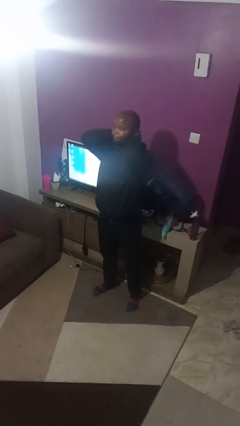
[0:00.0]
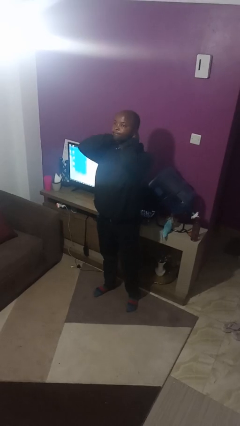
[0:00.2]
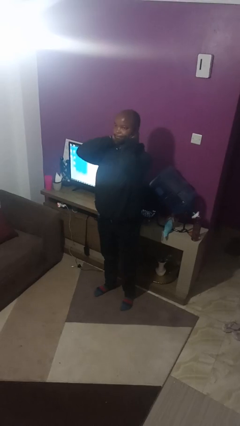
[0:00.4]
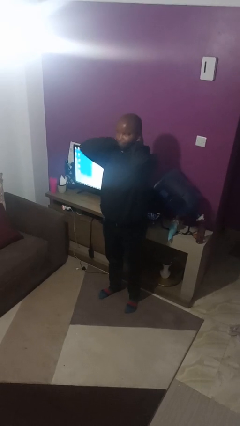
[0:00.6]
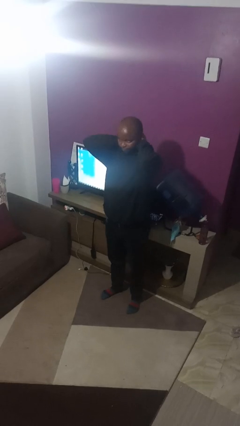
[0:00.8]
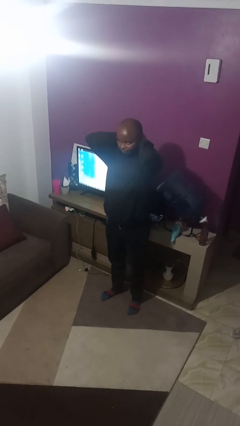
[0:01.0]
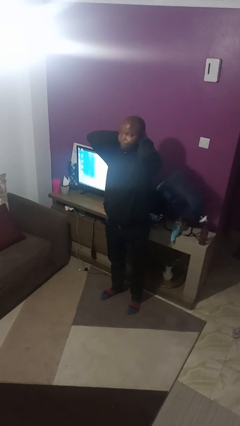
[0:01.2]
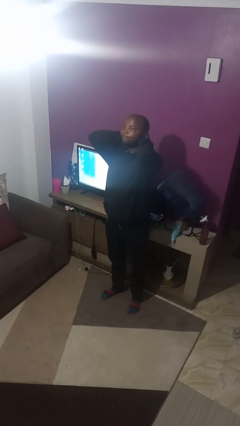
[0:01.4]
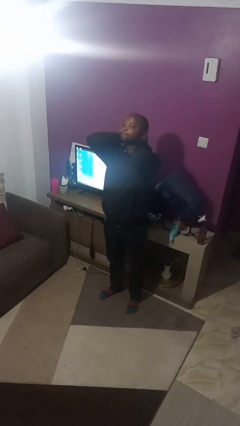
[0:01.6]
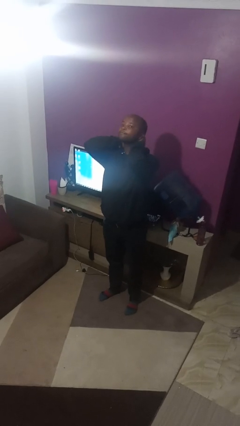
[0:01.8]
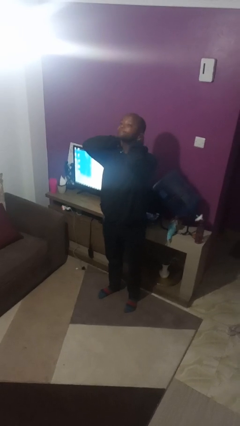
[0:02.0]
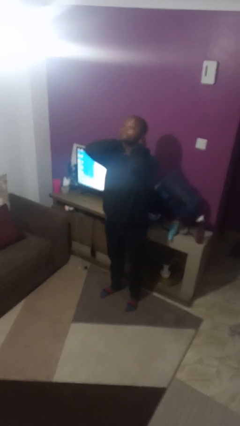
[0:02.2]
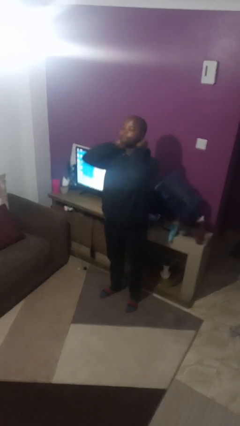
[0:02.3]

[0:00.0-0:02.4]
person rubs neck

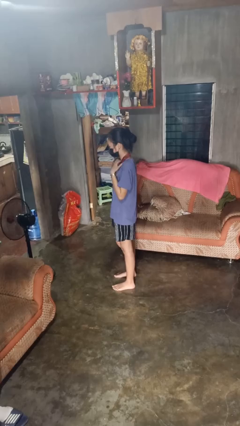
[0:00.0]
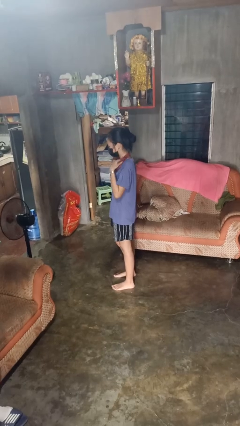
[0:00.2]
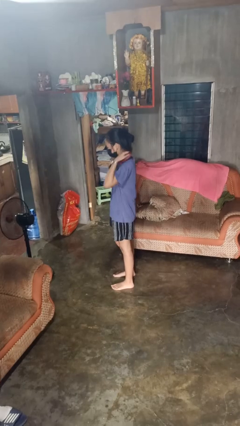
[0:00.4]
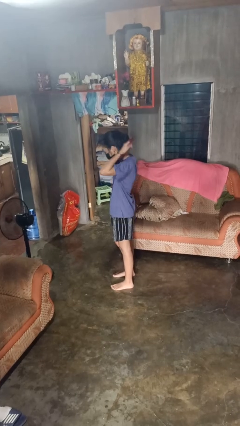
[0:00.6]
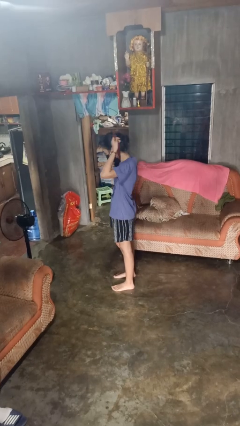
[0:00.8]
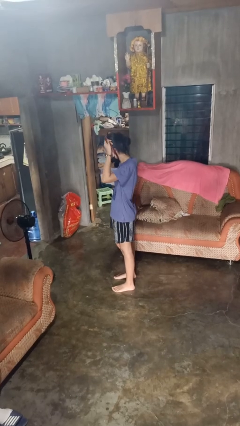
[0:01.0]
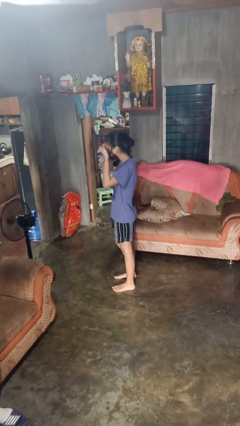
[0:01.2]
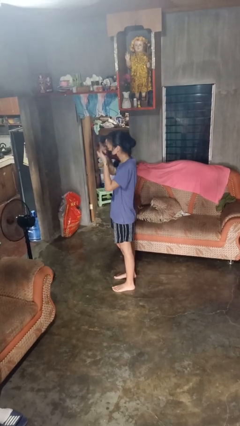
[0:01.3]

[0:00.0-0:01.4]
person takes off necklace

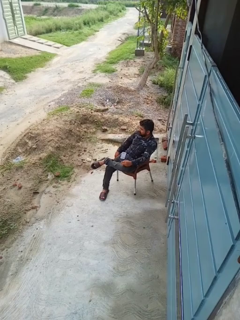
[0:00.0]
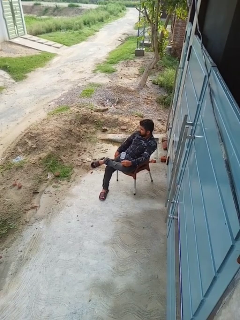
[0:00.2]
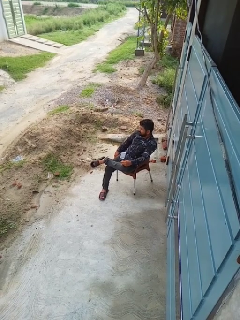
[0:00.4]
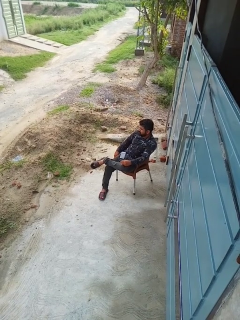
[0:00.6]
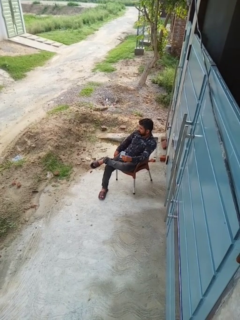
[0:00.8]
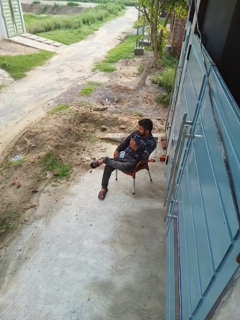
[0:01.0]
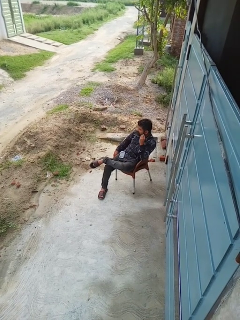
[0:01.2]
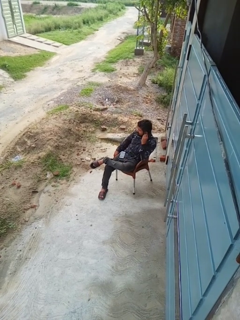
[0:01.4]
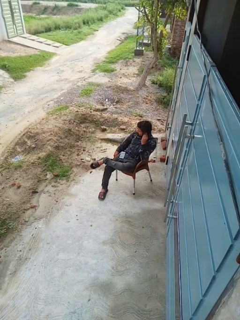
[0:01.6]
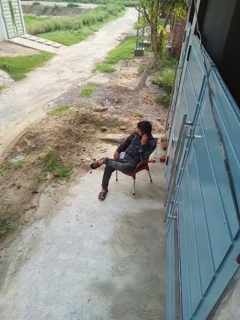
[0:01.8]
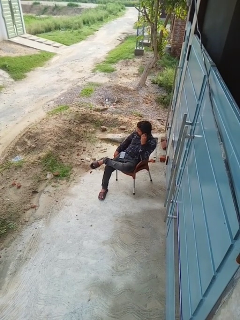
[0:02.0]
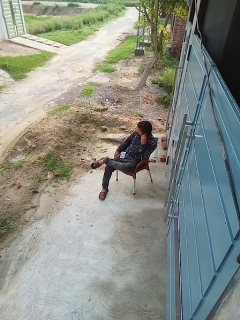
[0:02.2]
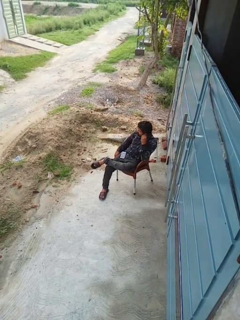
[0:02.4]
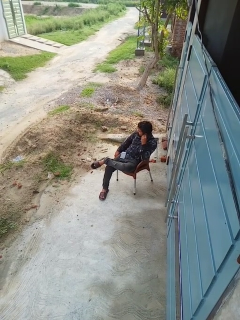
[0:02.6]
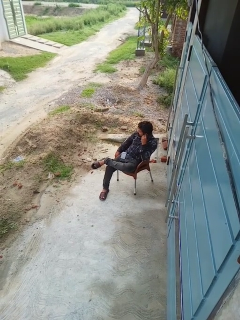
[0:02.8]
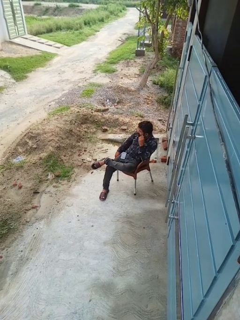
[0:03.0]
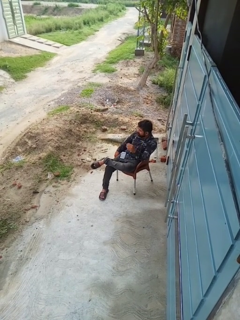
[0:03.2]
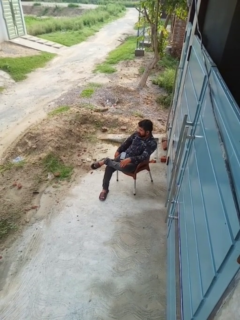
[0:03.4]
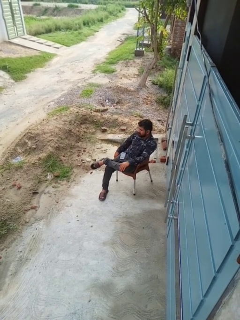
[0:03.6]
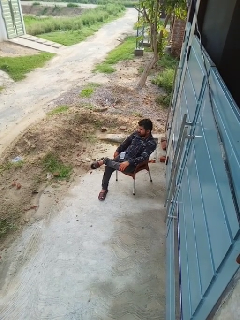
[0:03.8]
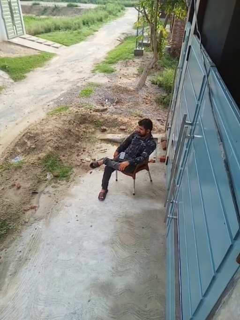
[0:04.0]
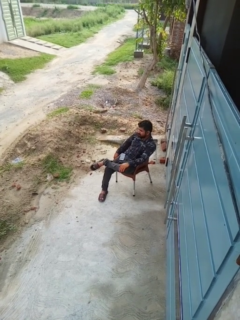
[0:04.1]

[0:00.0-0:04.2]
person puts on headphones

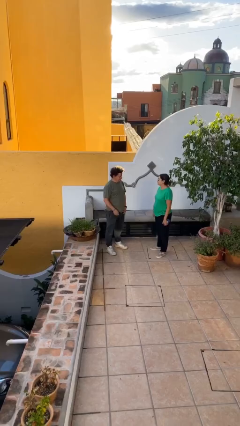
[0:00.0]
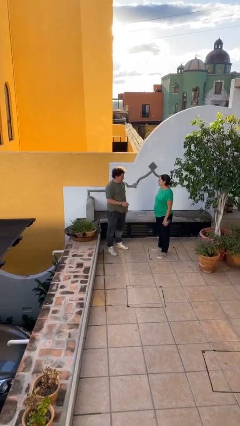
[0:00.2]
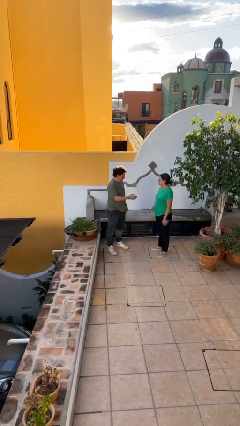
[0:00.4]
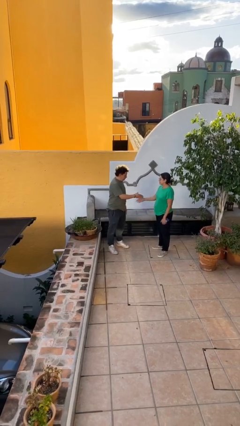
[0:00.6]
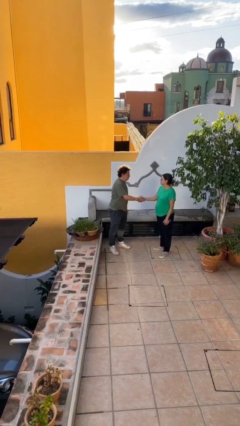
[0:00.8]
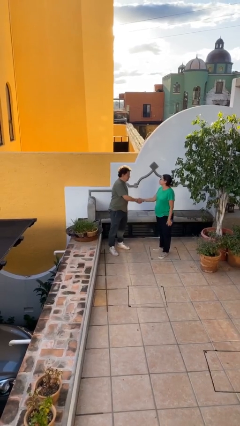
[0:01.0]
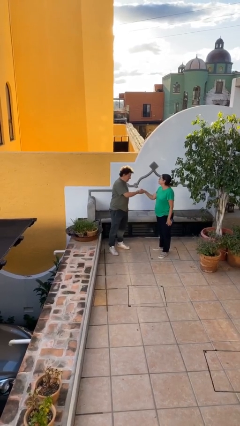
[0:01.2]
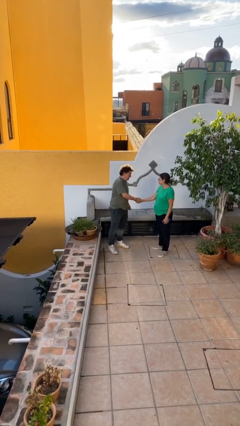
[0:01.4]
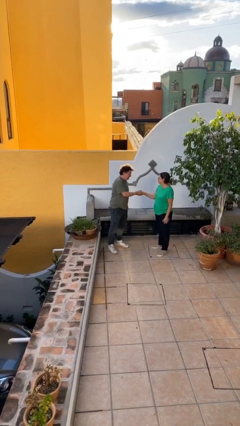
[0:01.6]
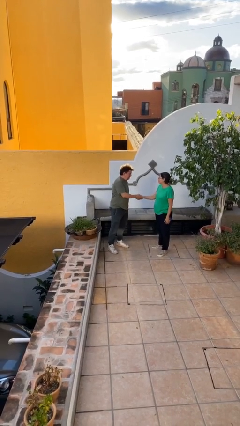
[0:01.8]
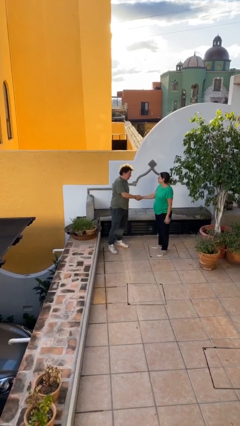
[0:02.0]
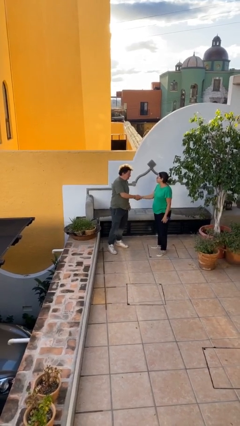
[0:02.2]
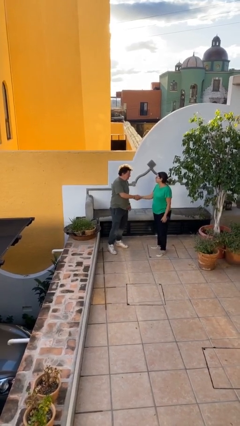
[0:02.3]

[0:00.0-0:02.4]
person shakes hand

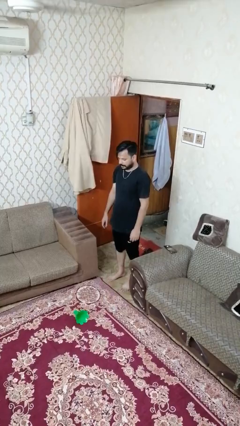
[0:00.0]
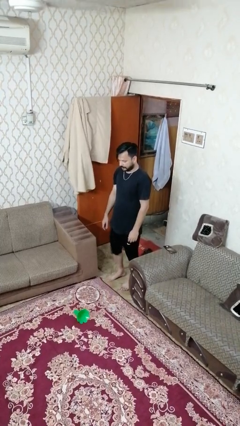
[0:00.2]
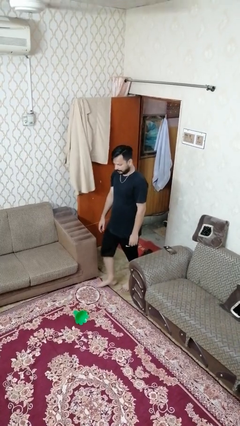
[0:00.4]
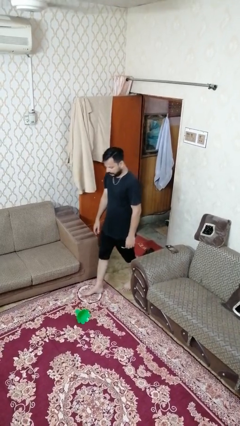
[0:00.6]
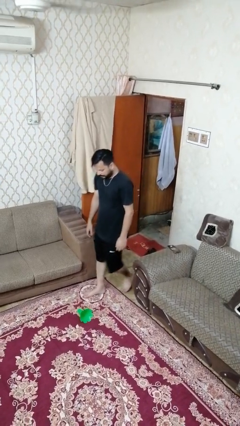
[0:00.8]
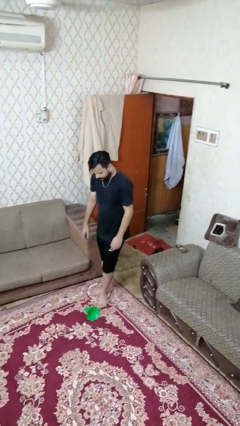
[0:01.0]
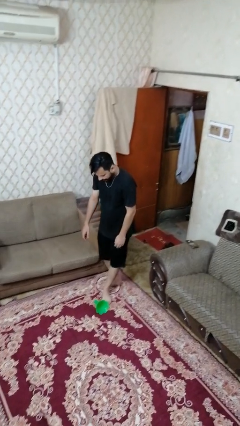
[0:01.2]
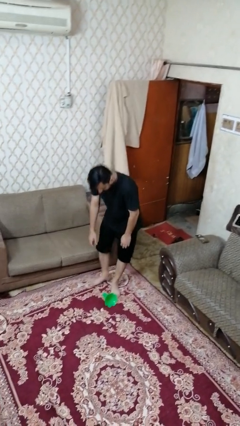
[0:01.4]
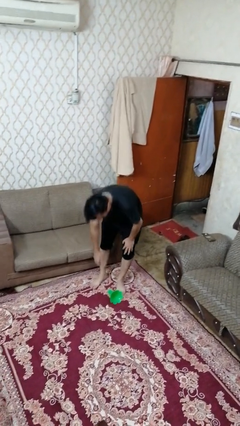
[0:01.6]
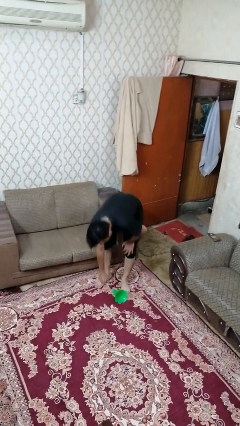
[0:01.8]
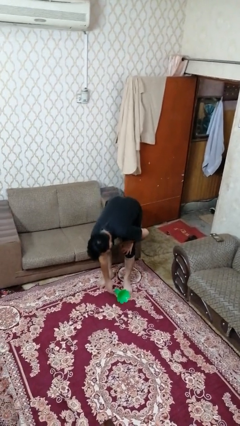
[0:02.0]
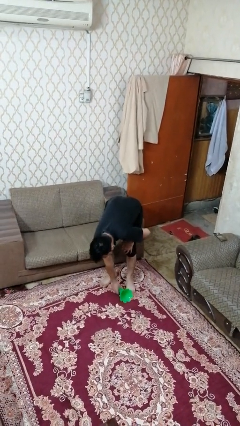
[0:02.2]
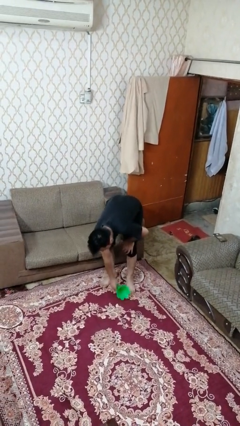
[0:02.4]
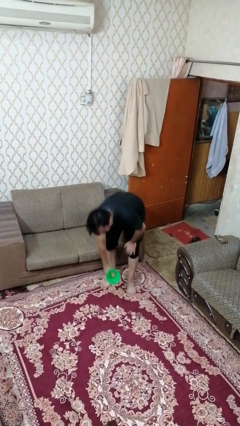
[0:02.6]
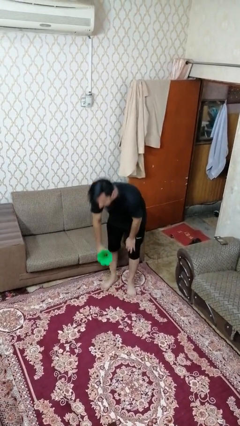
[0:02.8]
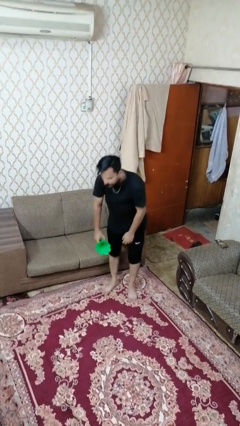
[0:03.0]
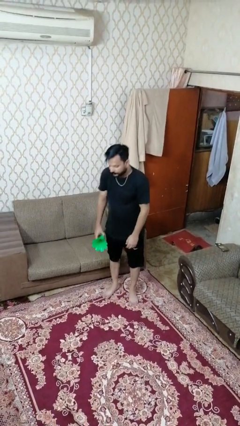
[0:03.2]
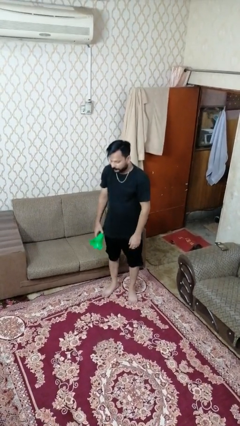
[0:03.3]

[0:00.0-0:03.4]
person picks up object from floor

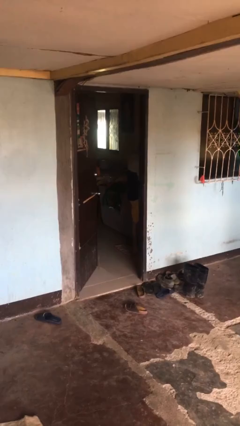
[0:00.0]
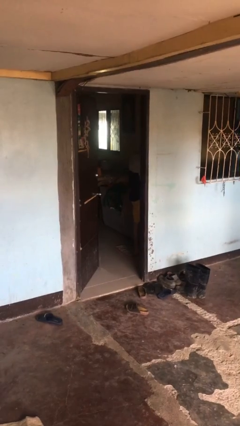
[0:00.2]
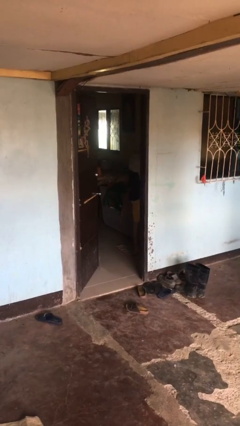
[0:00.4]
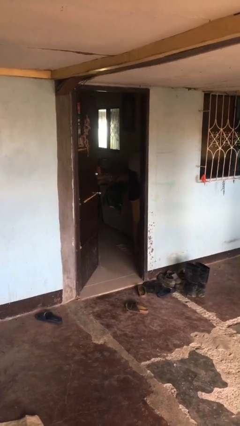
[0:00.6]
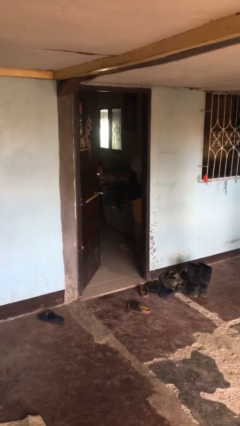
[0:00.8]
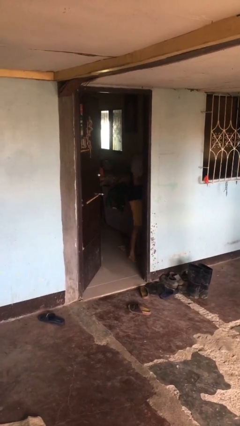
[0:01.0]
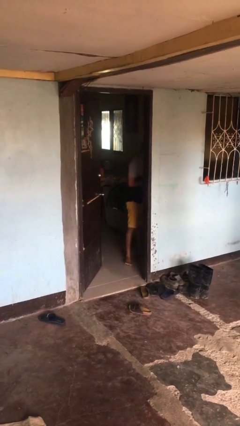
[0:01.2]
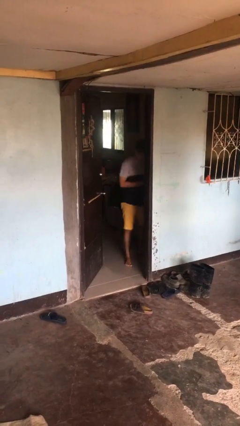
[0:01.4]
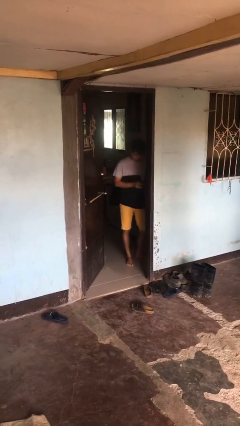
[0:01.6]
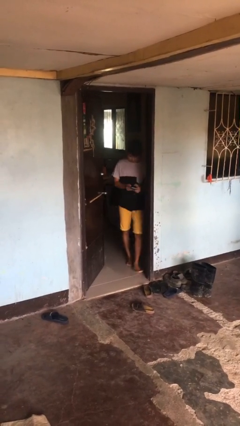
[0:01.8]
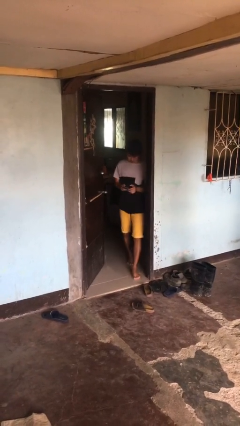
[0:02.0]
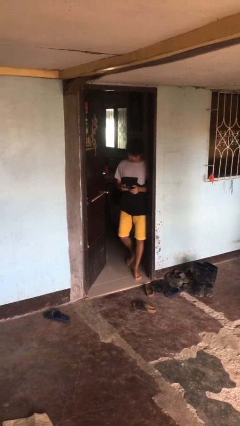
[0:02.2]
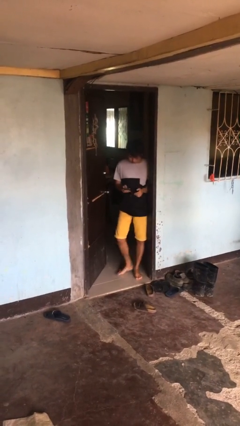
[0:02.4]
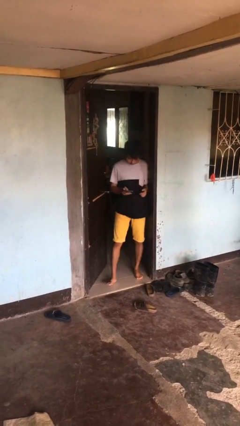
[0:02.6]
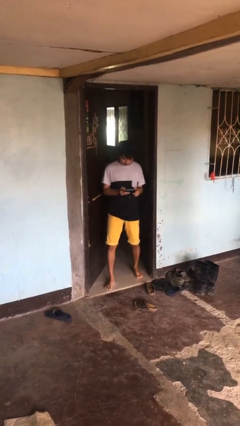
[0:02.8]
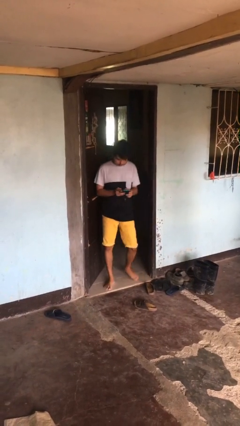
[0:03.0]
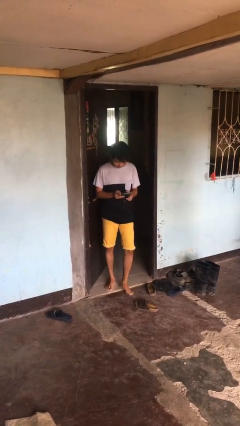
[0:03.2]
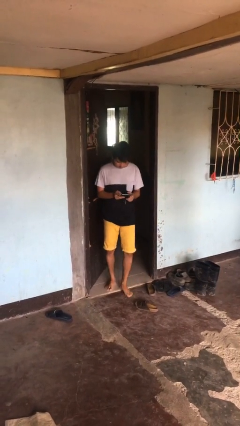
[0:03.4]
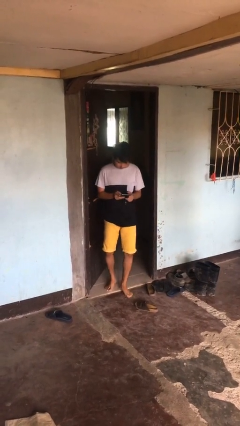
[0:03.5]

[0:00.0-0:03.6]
person enters scene through structure

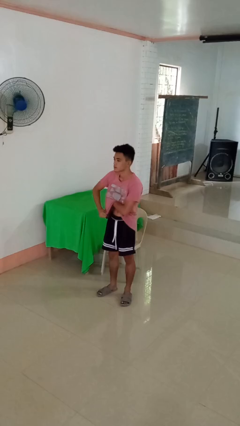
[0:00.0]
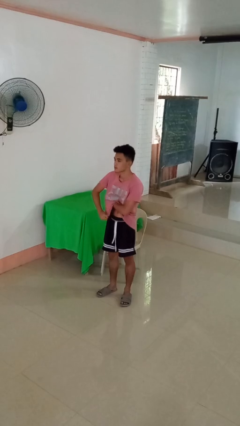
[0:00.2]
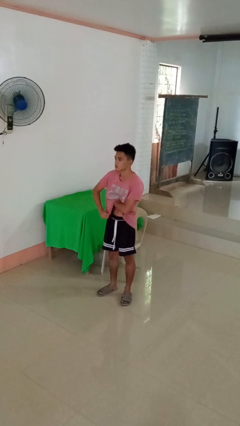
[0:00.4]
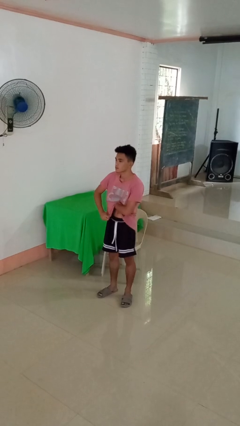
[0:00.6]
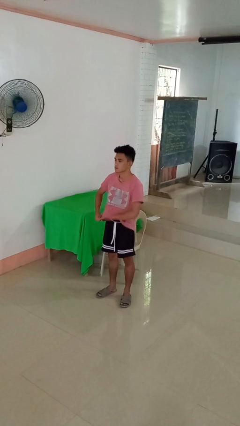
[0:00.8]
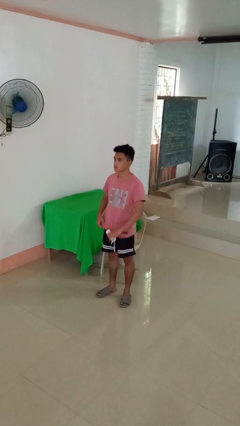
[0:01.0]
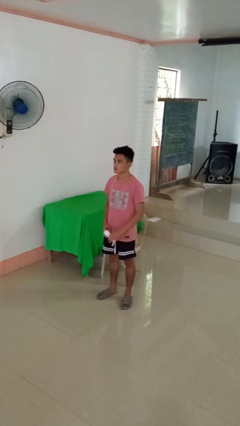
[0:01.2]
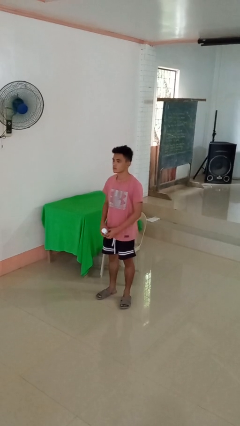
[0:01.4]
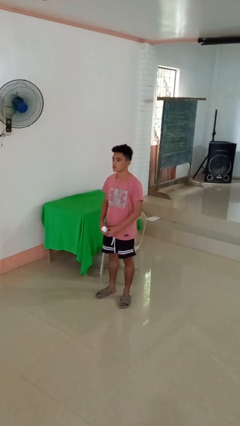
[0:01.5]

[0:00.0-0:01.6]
person applies deodorant
